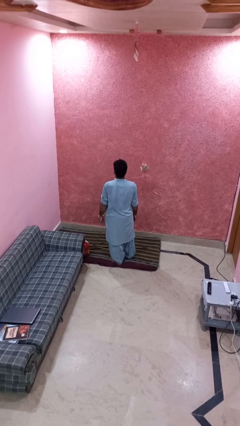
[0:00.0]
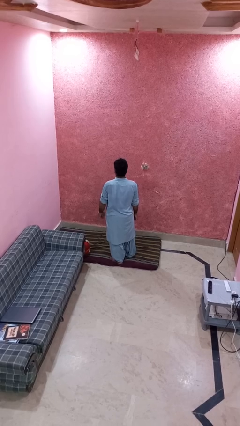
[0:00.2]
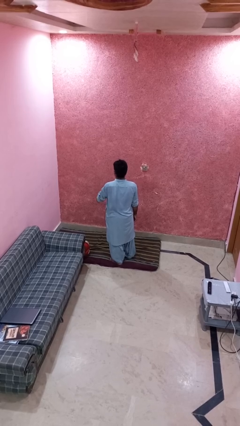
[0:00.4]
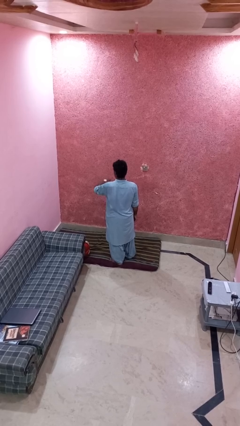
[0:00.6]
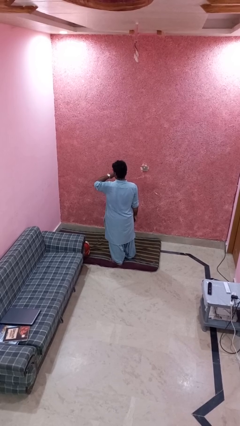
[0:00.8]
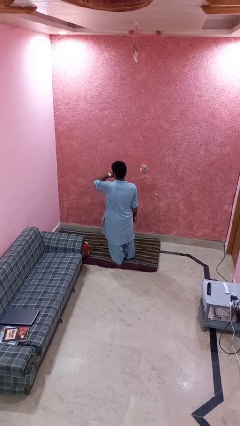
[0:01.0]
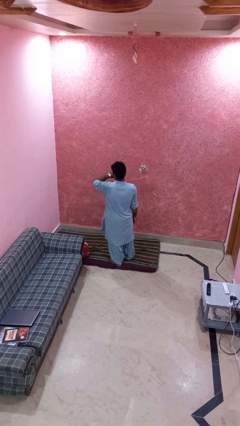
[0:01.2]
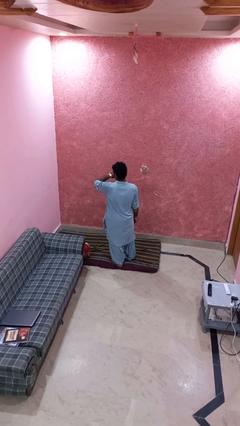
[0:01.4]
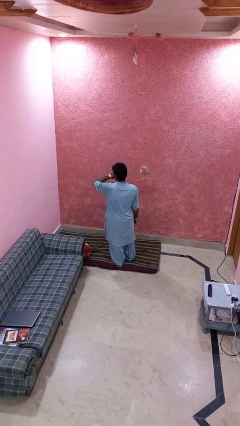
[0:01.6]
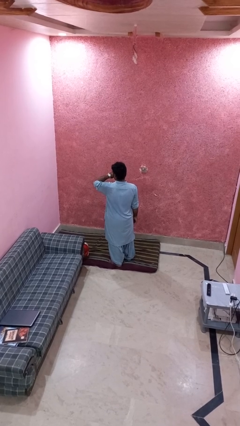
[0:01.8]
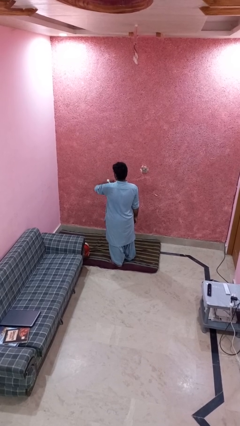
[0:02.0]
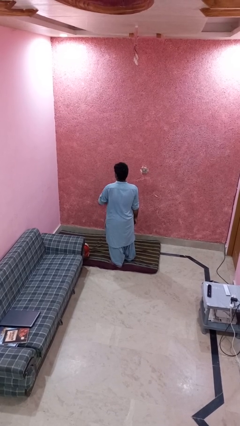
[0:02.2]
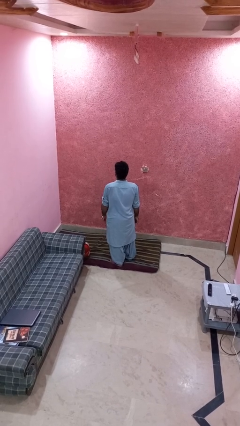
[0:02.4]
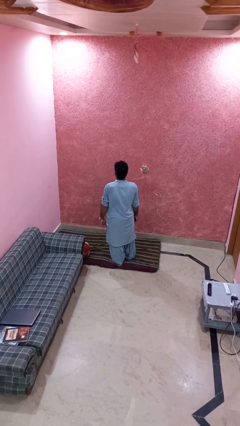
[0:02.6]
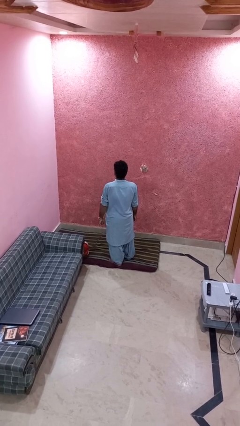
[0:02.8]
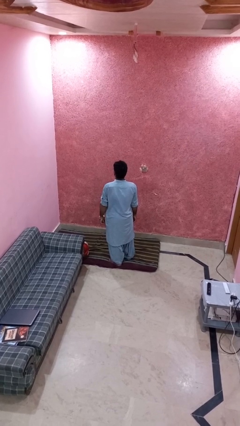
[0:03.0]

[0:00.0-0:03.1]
person looks at wristwatch

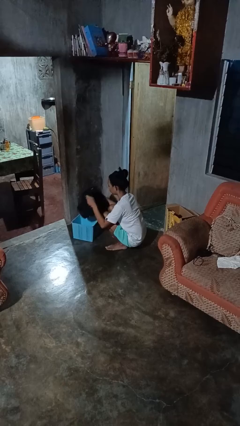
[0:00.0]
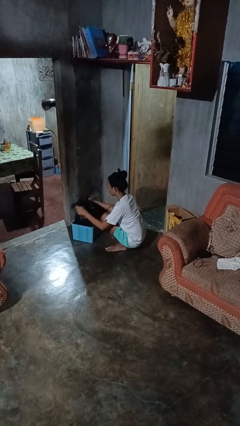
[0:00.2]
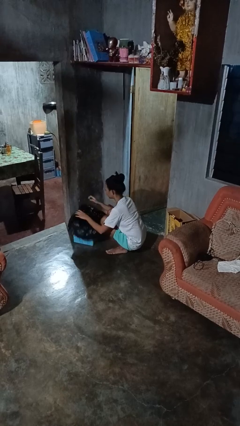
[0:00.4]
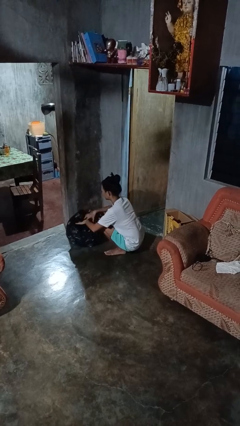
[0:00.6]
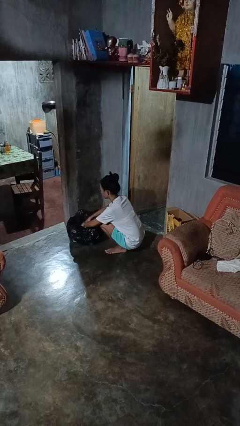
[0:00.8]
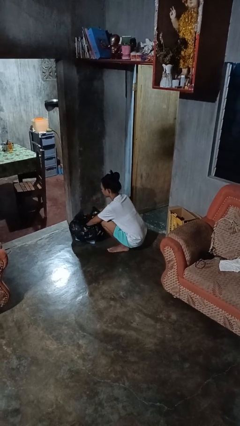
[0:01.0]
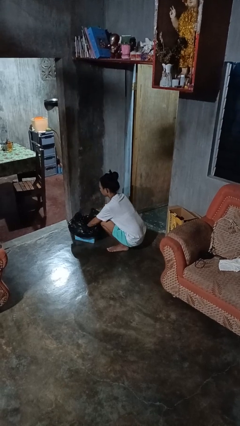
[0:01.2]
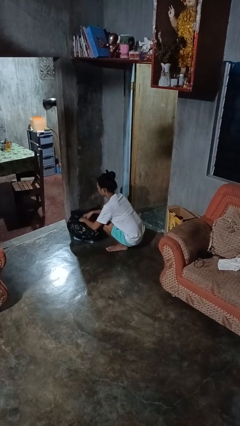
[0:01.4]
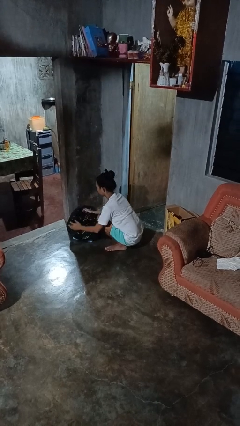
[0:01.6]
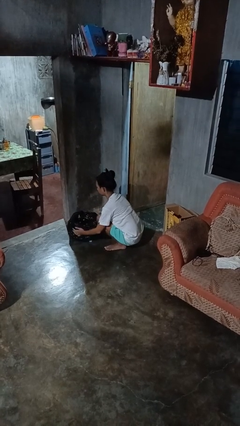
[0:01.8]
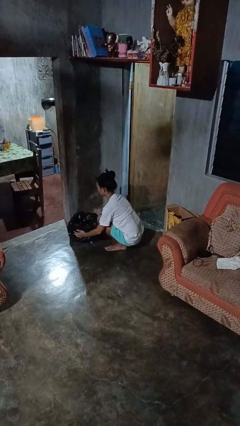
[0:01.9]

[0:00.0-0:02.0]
person inserts trashbag into trashcan

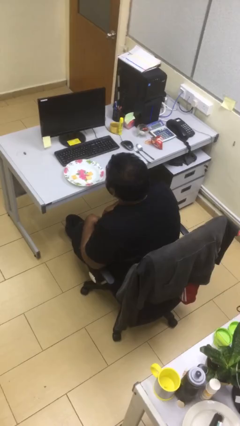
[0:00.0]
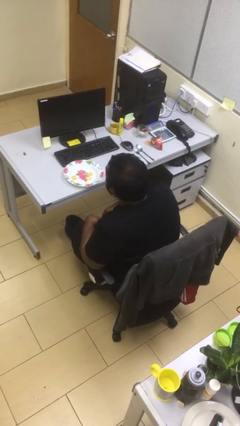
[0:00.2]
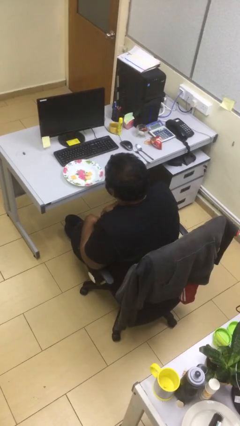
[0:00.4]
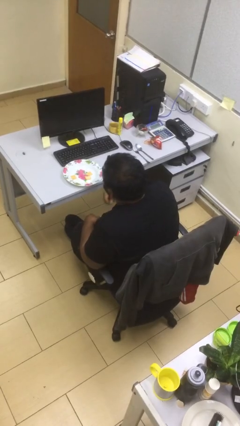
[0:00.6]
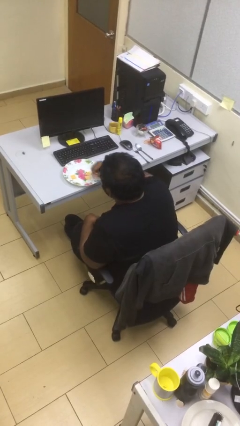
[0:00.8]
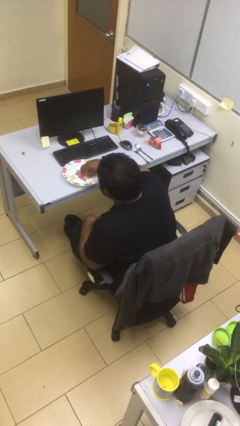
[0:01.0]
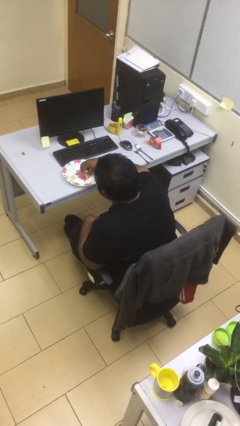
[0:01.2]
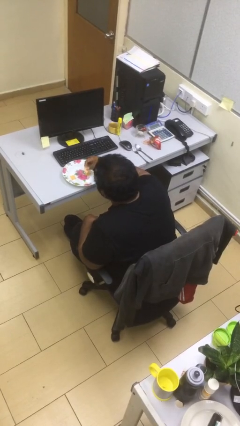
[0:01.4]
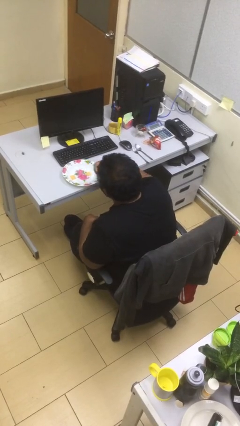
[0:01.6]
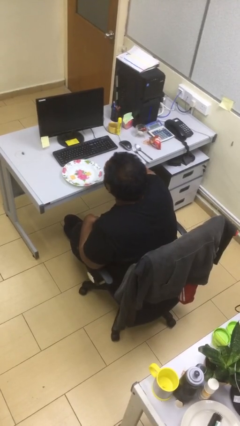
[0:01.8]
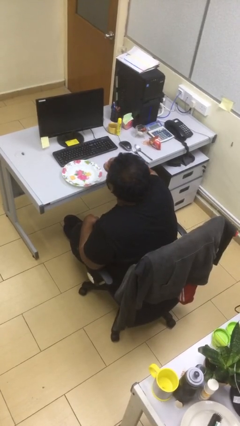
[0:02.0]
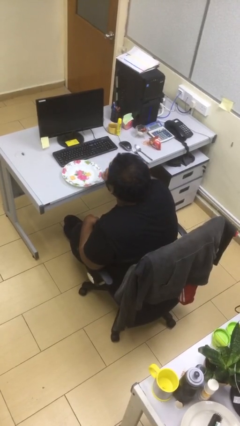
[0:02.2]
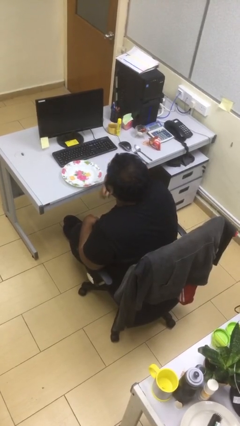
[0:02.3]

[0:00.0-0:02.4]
person eats with hands

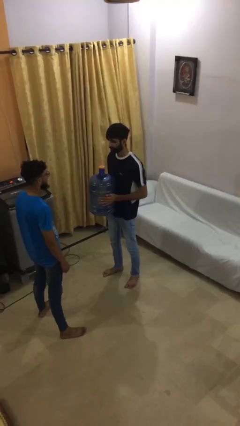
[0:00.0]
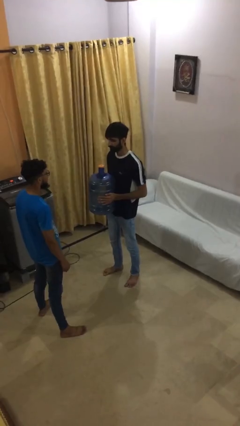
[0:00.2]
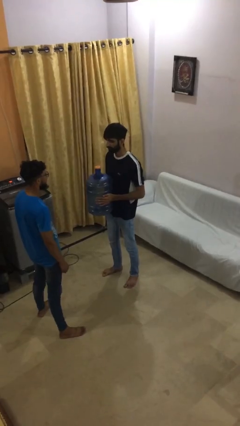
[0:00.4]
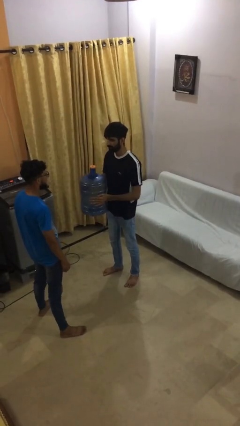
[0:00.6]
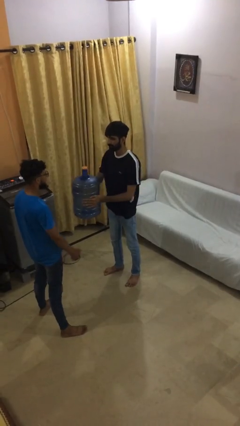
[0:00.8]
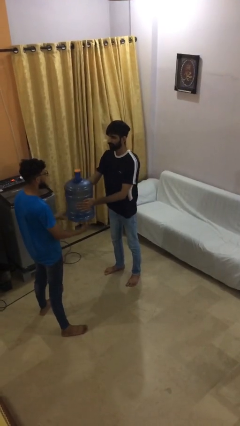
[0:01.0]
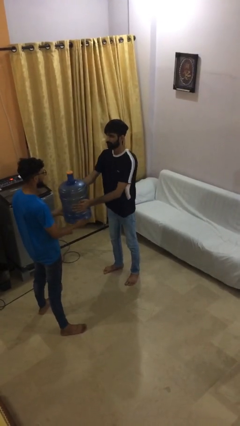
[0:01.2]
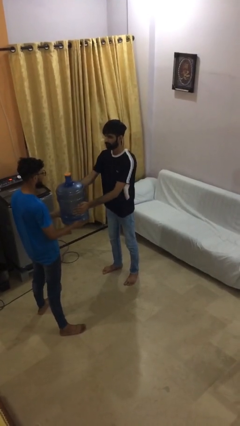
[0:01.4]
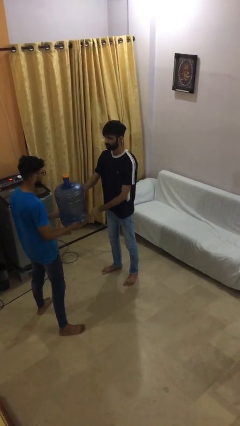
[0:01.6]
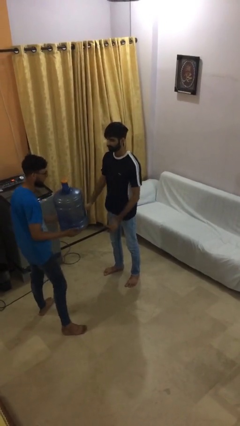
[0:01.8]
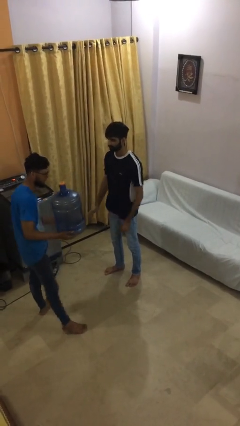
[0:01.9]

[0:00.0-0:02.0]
person transfers object to person

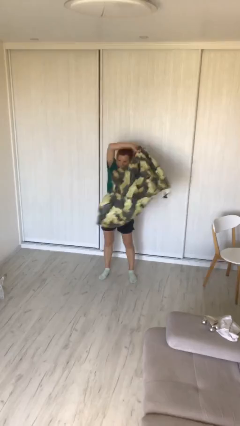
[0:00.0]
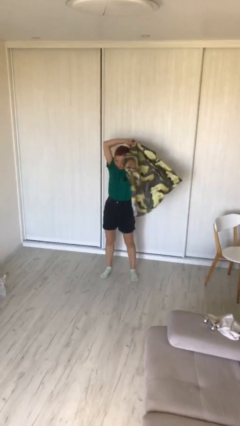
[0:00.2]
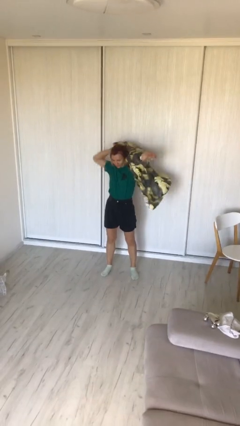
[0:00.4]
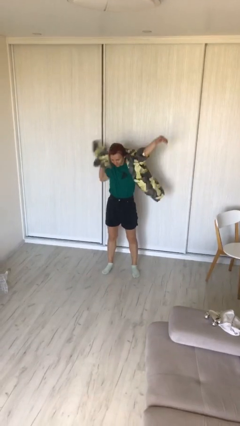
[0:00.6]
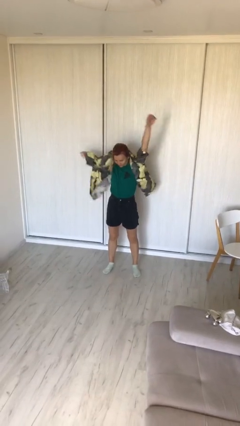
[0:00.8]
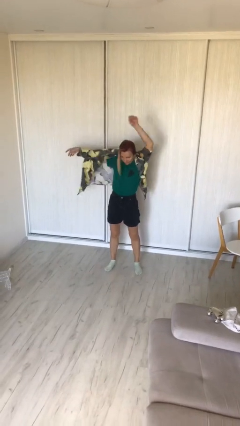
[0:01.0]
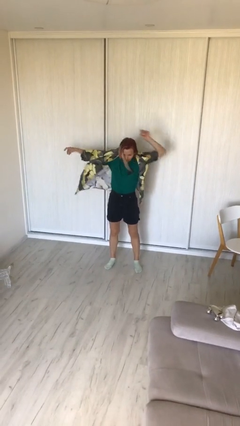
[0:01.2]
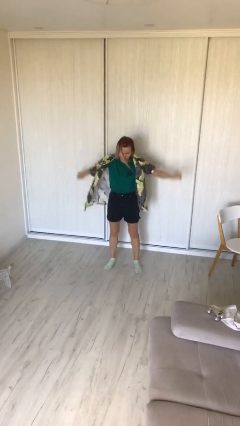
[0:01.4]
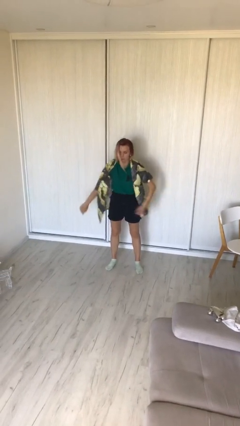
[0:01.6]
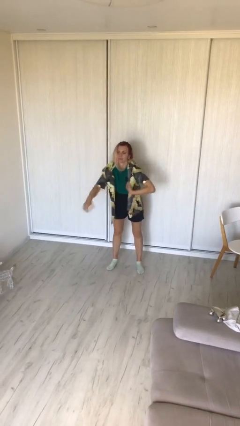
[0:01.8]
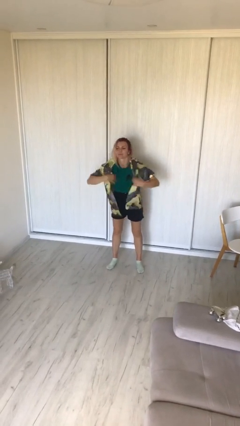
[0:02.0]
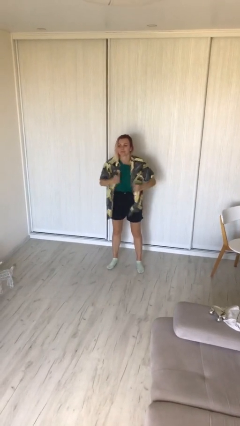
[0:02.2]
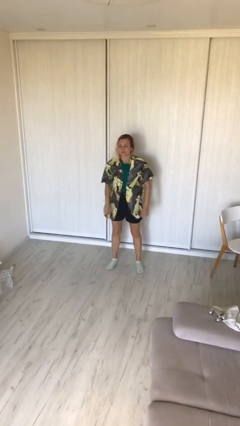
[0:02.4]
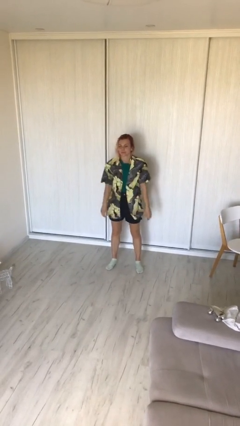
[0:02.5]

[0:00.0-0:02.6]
person puts on shirt

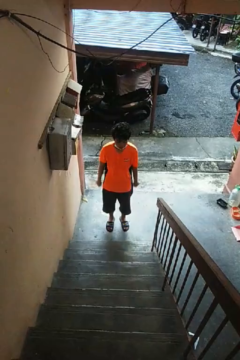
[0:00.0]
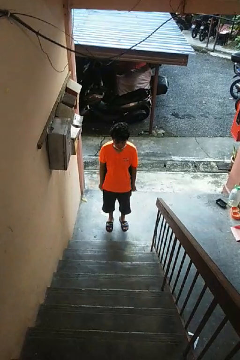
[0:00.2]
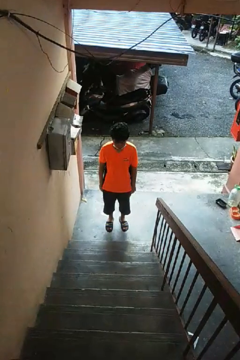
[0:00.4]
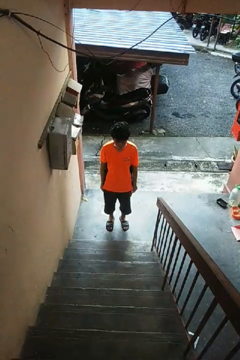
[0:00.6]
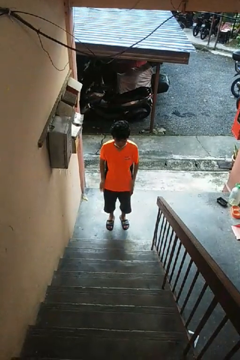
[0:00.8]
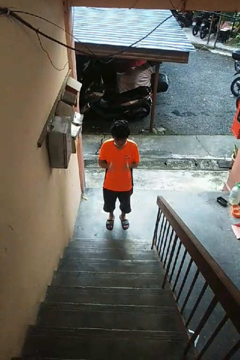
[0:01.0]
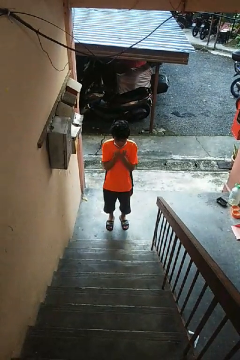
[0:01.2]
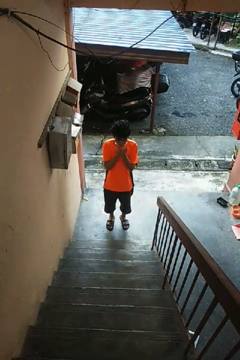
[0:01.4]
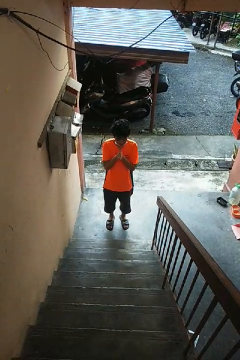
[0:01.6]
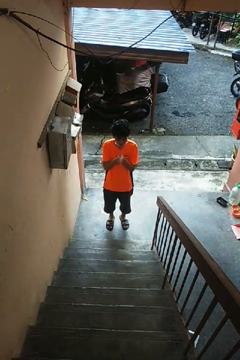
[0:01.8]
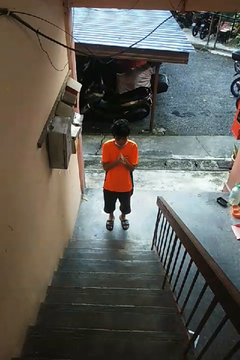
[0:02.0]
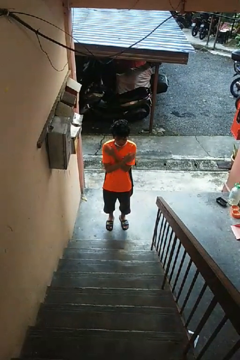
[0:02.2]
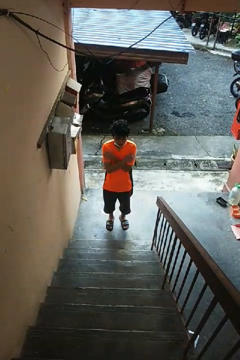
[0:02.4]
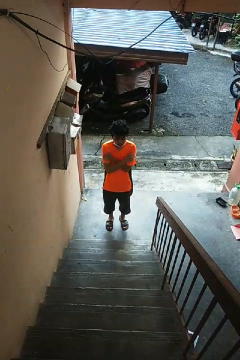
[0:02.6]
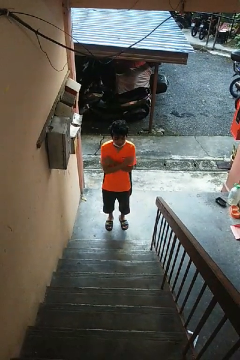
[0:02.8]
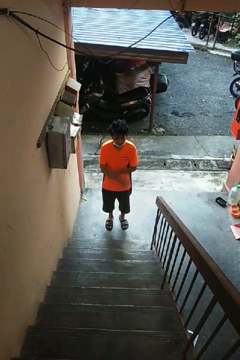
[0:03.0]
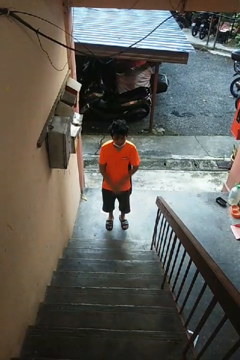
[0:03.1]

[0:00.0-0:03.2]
person blows into hands

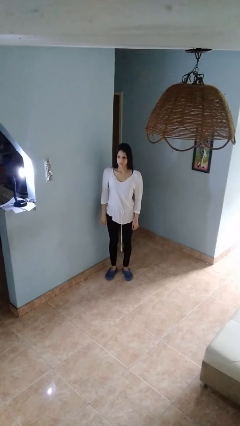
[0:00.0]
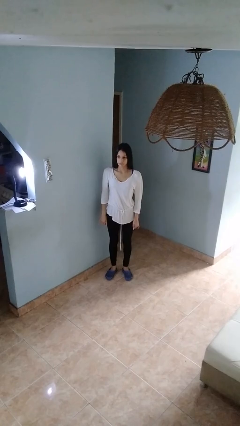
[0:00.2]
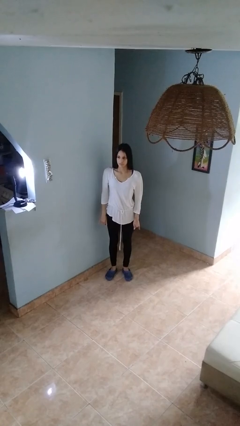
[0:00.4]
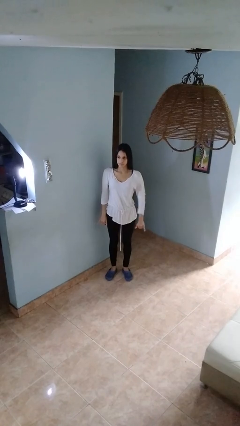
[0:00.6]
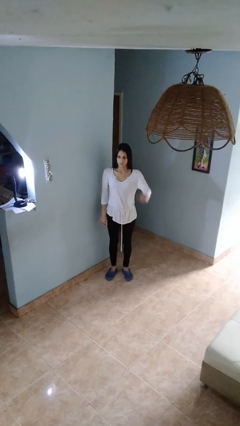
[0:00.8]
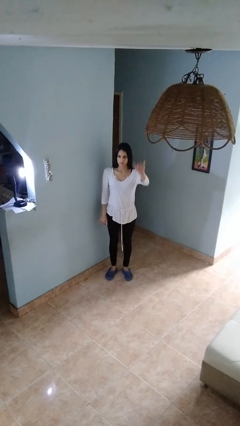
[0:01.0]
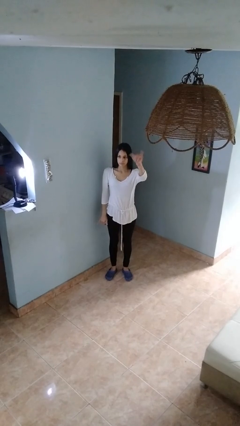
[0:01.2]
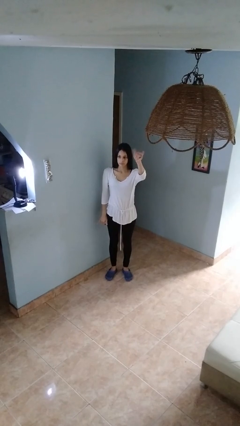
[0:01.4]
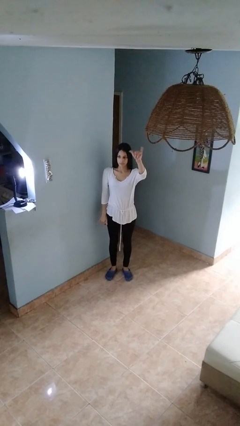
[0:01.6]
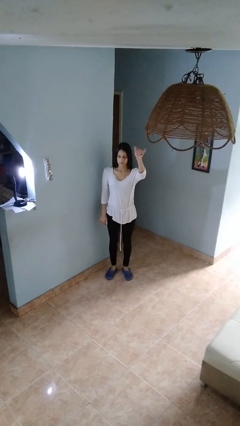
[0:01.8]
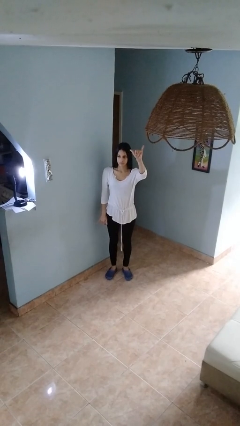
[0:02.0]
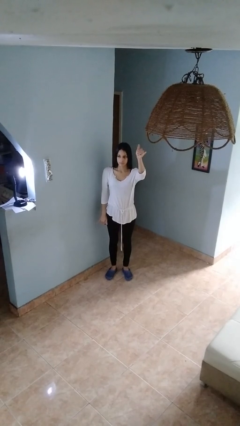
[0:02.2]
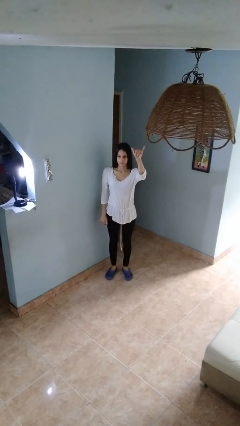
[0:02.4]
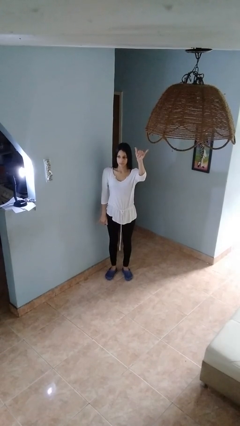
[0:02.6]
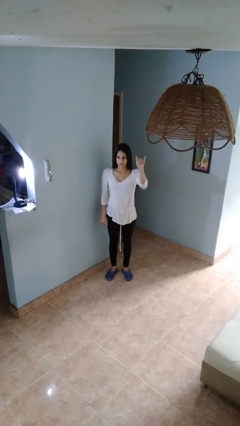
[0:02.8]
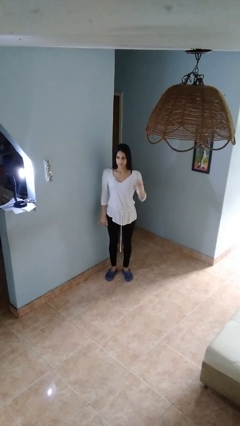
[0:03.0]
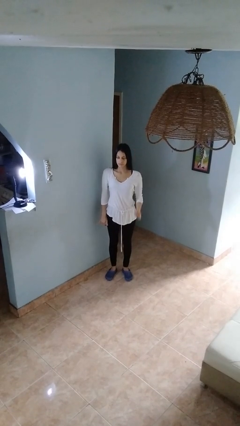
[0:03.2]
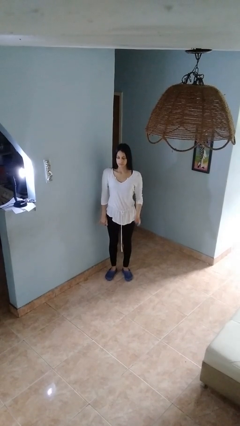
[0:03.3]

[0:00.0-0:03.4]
person gestures hang loose
